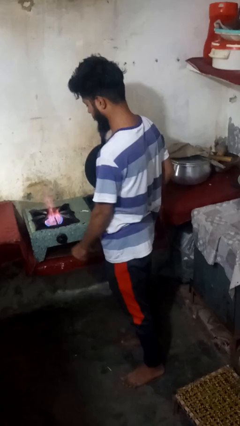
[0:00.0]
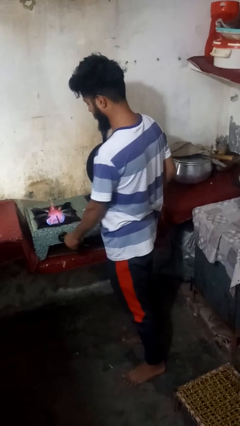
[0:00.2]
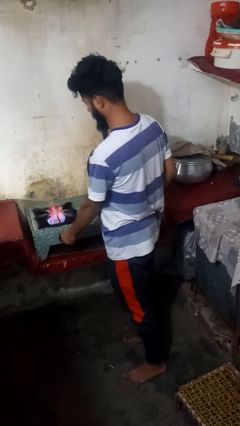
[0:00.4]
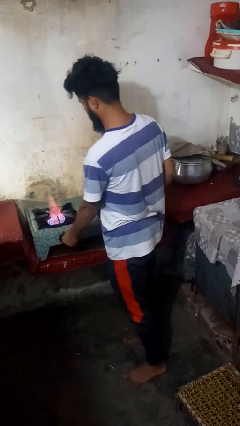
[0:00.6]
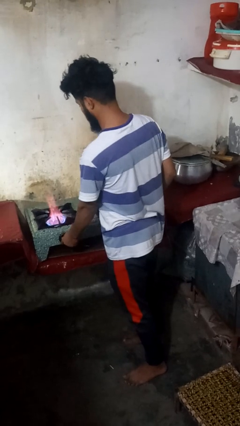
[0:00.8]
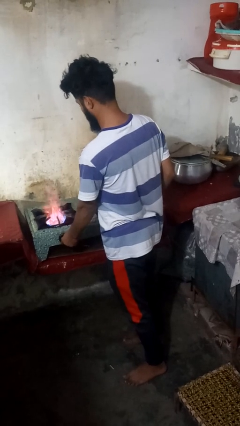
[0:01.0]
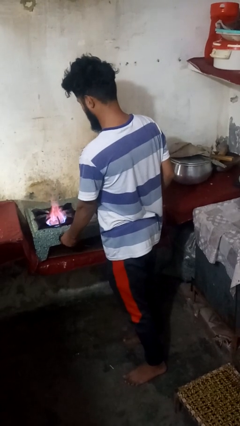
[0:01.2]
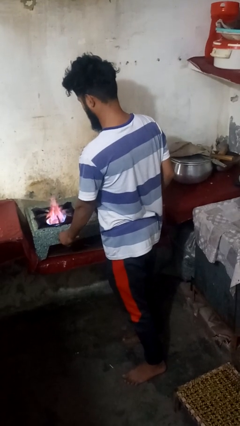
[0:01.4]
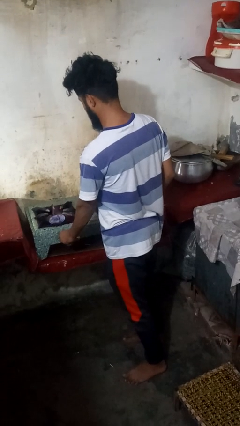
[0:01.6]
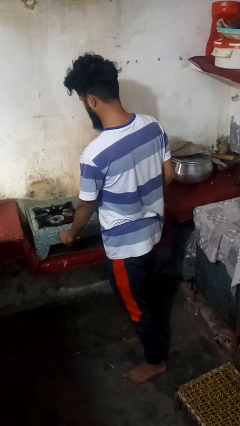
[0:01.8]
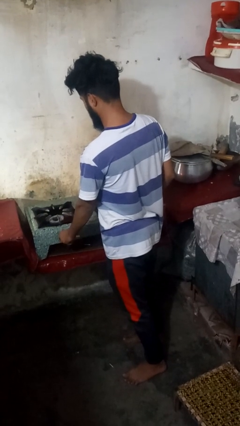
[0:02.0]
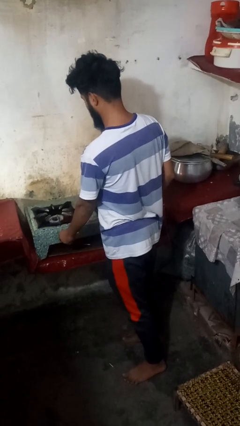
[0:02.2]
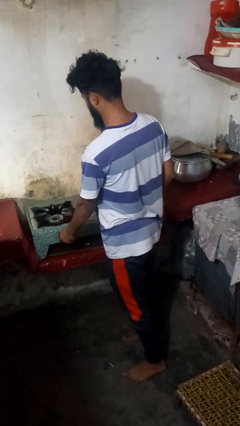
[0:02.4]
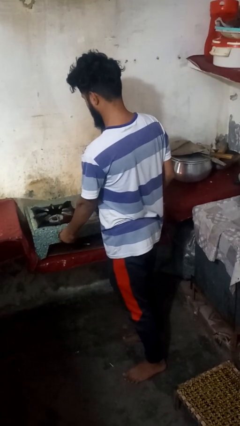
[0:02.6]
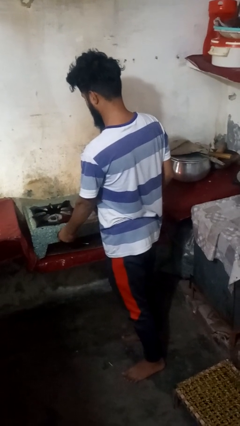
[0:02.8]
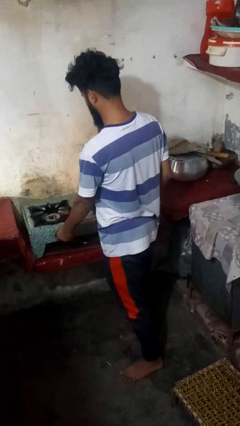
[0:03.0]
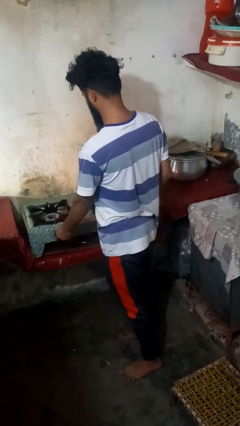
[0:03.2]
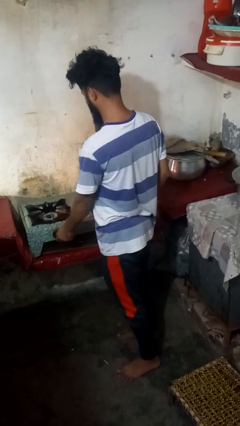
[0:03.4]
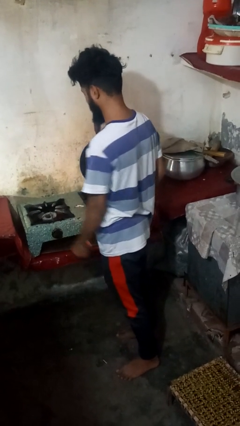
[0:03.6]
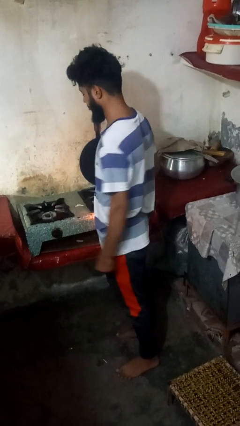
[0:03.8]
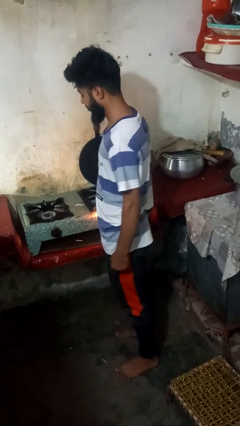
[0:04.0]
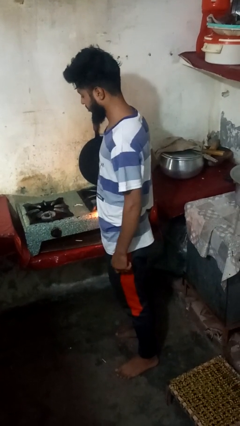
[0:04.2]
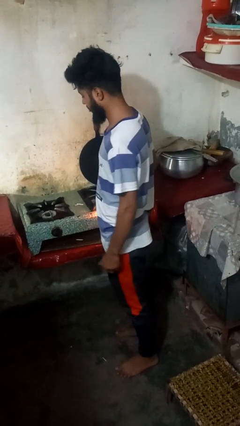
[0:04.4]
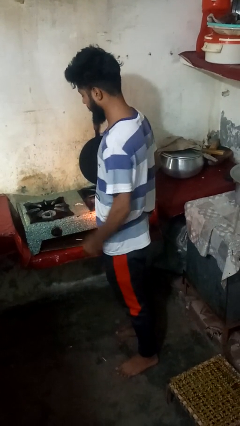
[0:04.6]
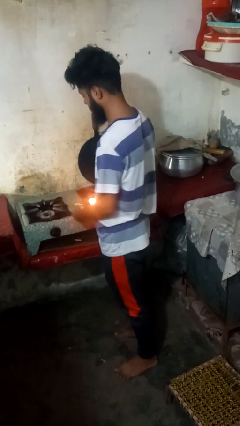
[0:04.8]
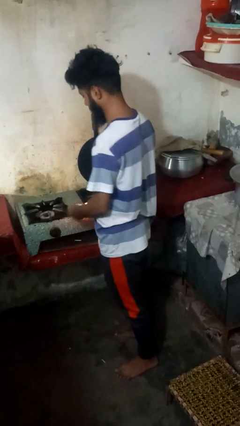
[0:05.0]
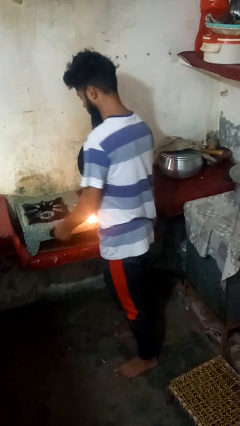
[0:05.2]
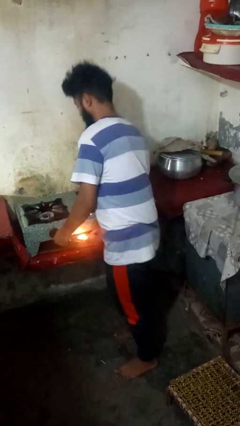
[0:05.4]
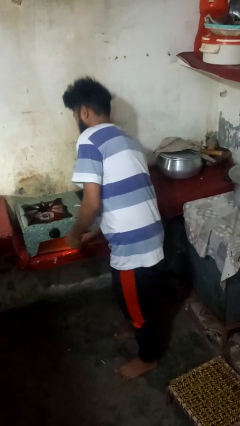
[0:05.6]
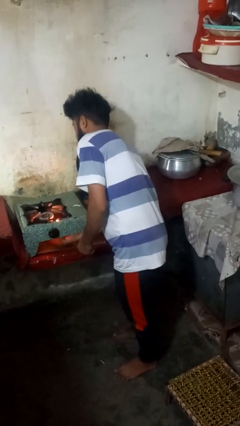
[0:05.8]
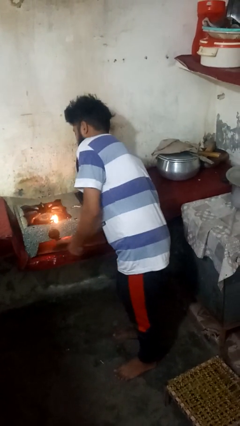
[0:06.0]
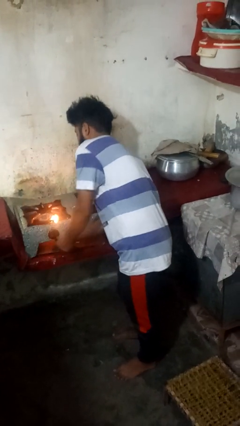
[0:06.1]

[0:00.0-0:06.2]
person turns off stovetop

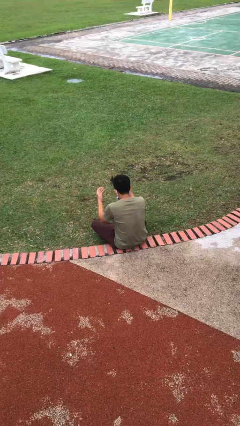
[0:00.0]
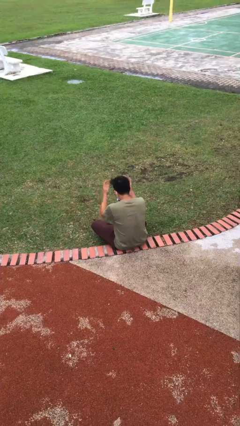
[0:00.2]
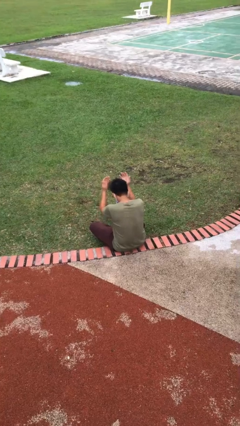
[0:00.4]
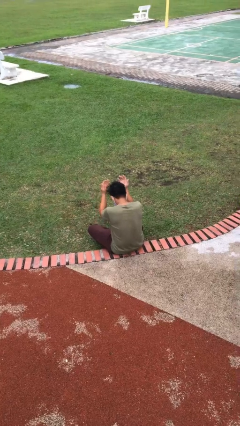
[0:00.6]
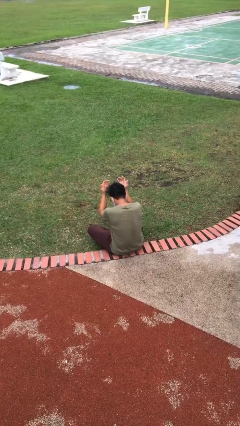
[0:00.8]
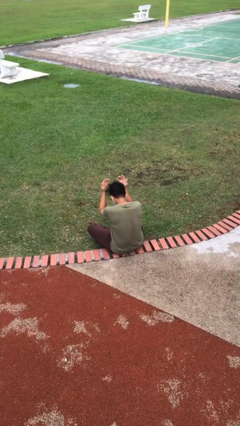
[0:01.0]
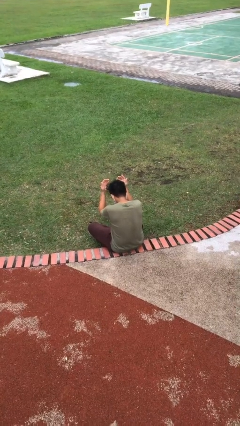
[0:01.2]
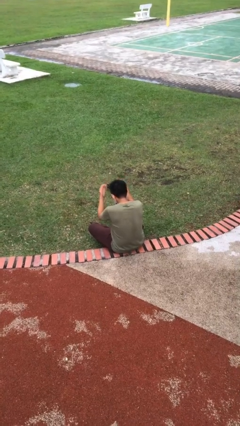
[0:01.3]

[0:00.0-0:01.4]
person prays

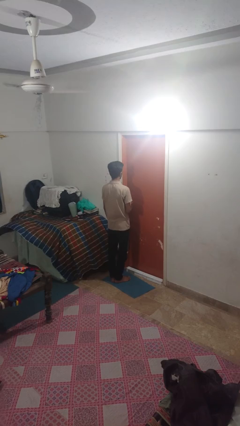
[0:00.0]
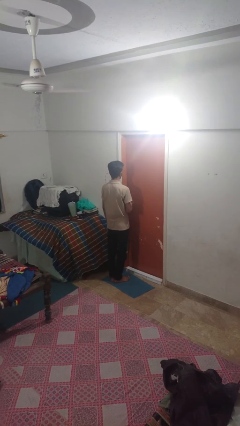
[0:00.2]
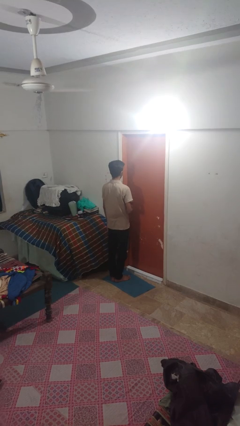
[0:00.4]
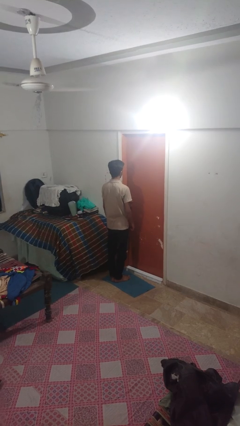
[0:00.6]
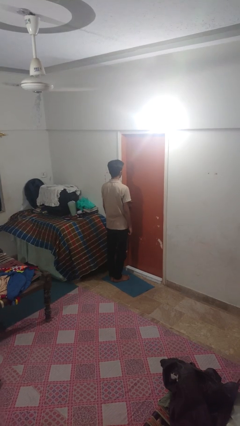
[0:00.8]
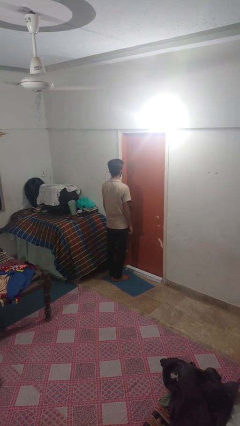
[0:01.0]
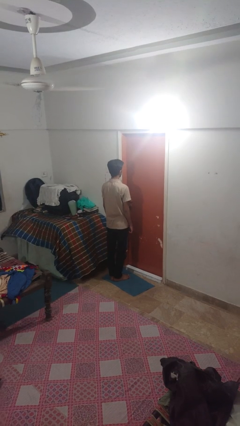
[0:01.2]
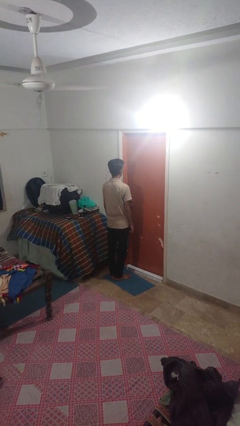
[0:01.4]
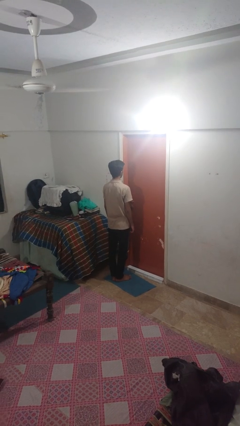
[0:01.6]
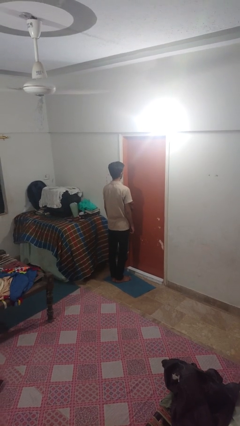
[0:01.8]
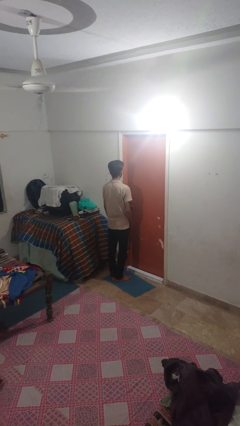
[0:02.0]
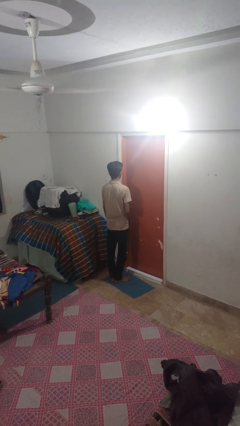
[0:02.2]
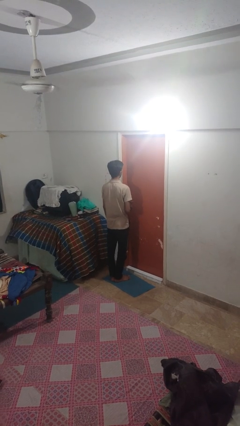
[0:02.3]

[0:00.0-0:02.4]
person unlocks door with keys

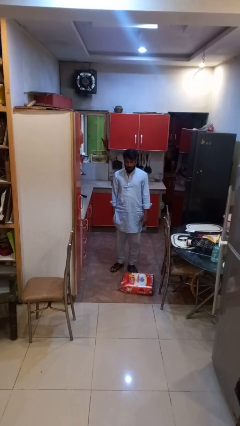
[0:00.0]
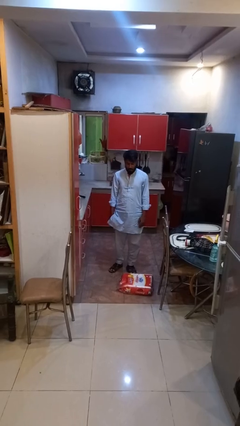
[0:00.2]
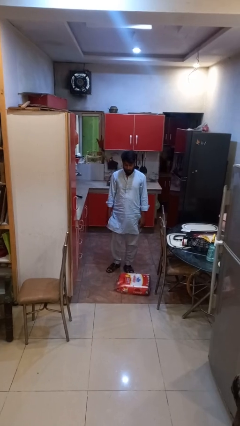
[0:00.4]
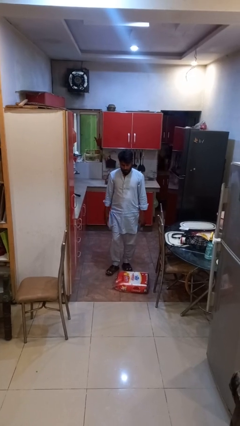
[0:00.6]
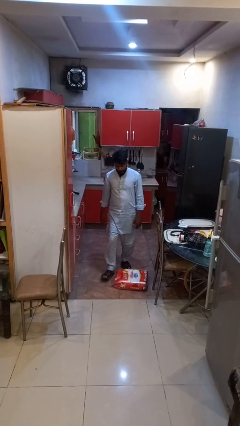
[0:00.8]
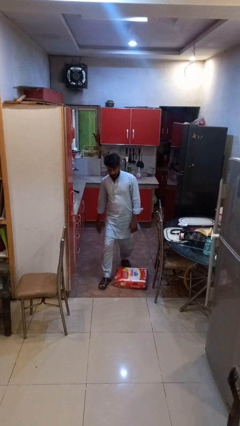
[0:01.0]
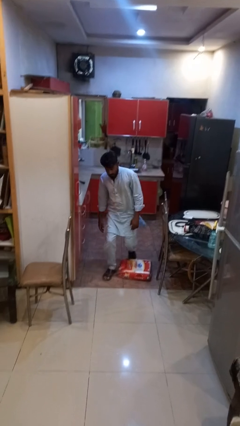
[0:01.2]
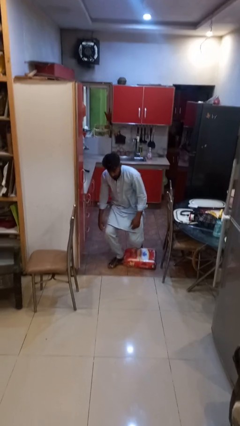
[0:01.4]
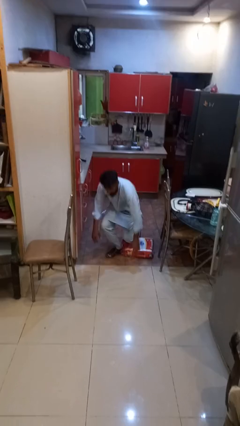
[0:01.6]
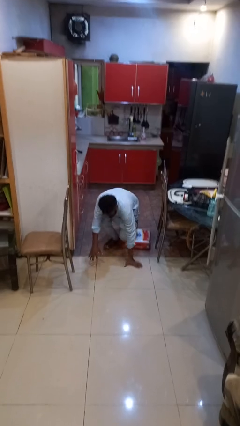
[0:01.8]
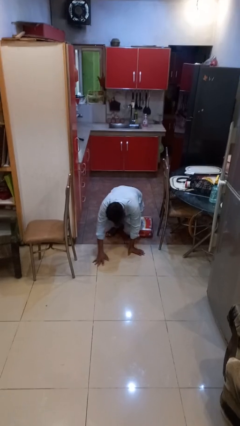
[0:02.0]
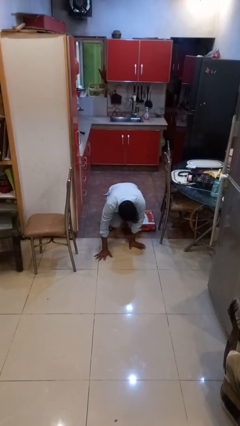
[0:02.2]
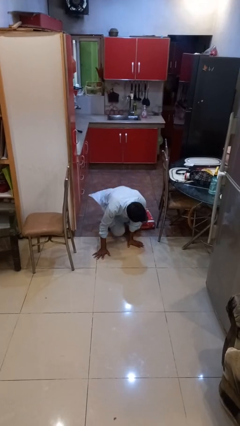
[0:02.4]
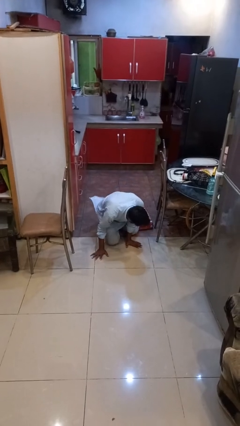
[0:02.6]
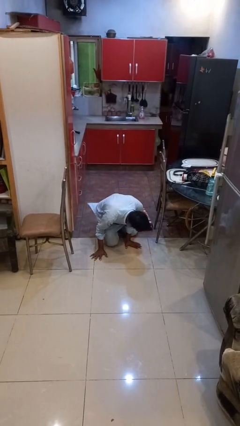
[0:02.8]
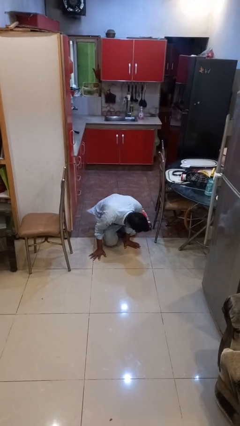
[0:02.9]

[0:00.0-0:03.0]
person trips on object on floor

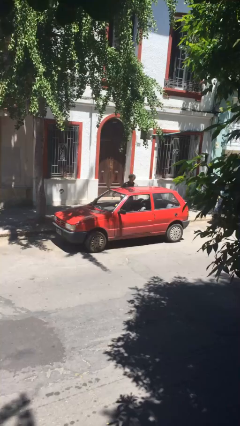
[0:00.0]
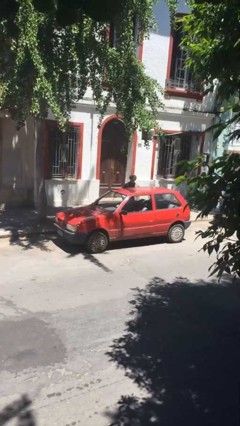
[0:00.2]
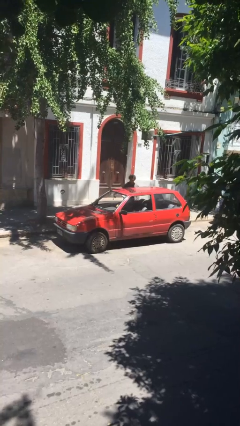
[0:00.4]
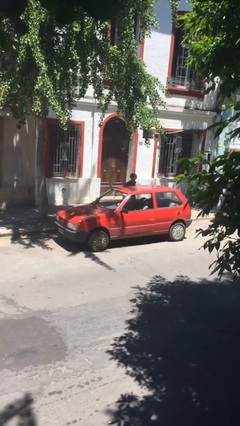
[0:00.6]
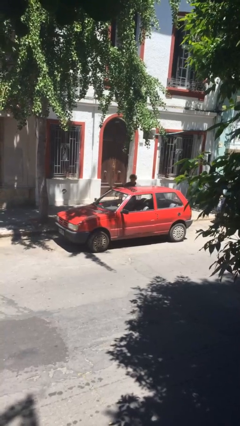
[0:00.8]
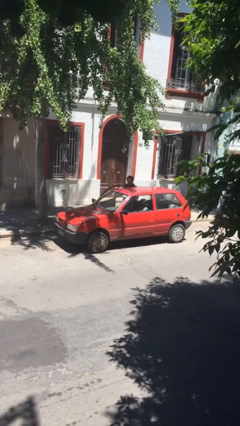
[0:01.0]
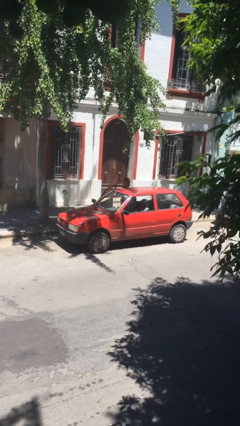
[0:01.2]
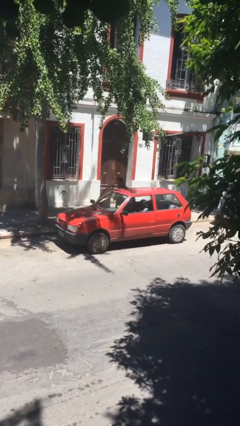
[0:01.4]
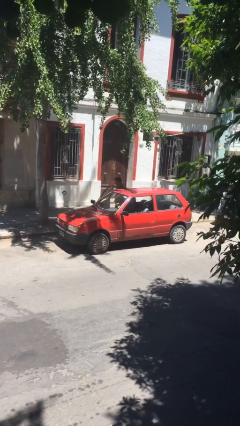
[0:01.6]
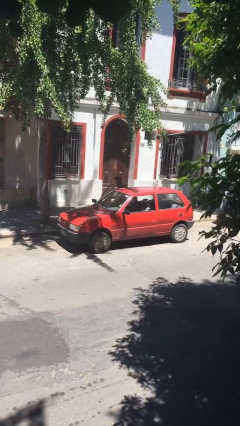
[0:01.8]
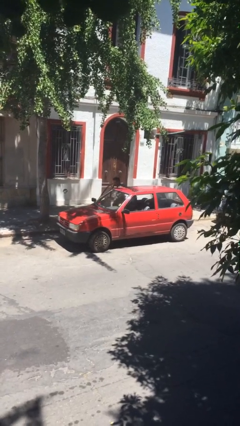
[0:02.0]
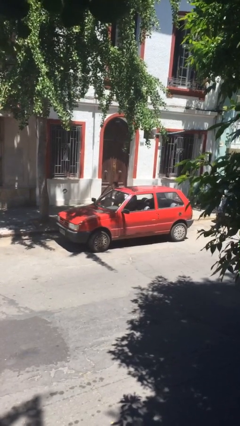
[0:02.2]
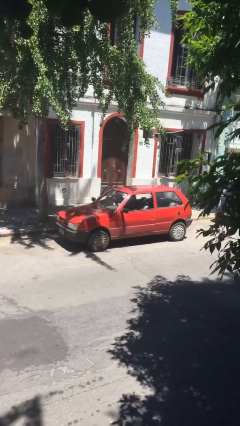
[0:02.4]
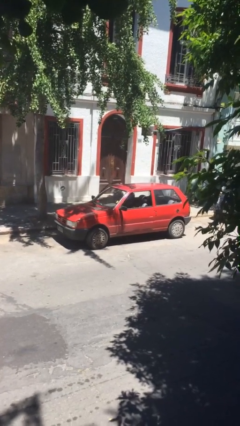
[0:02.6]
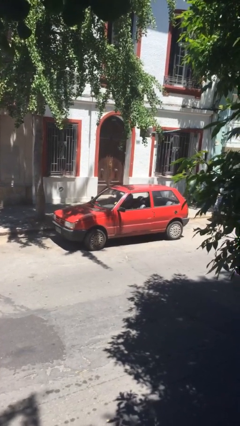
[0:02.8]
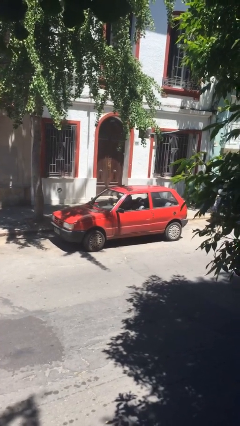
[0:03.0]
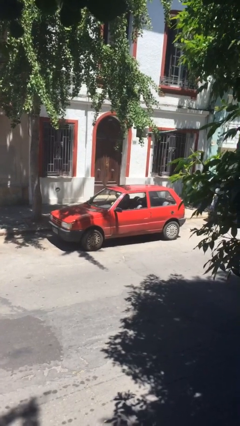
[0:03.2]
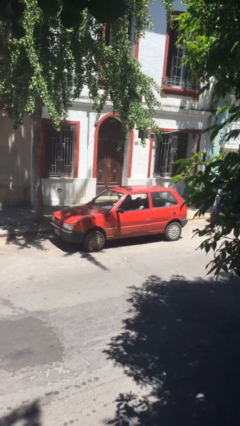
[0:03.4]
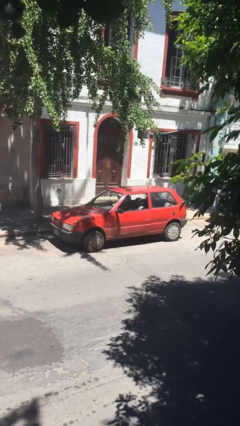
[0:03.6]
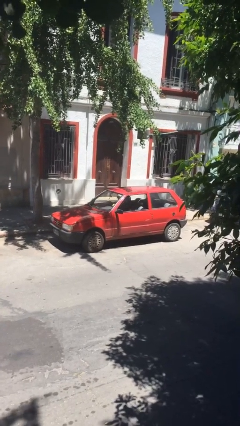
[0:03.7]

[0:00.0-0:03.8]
car picks up person

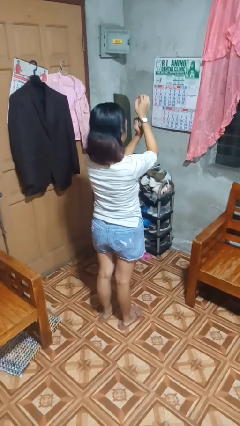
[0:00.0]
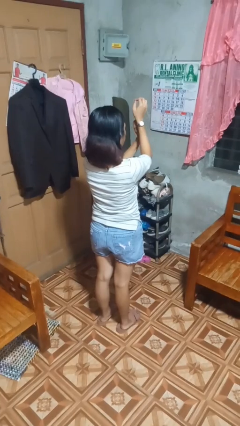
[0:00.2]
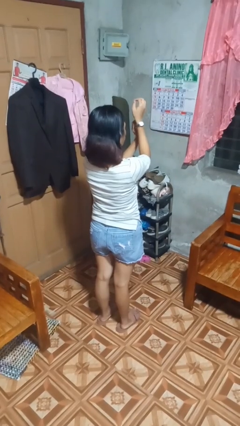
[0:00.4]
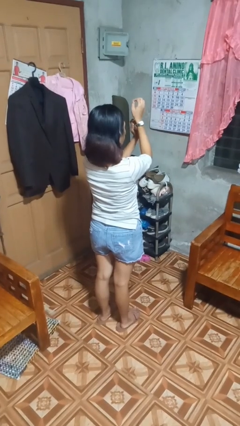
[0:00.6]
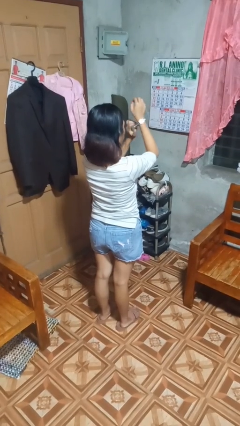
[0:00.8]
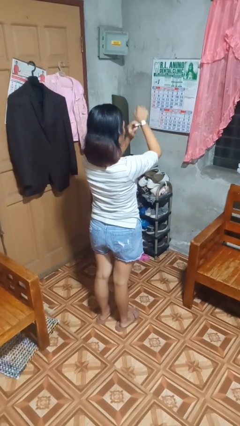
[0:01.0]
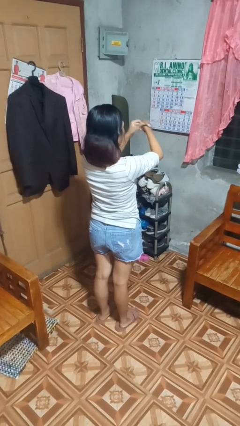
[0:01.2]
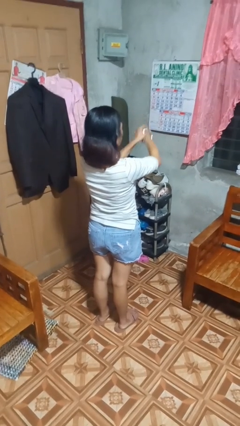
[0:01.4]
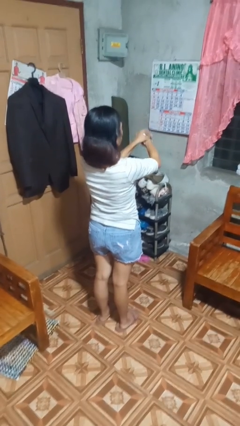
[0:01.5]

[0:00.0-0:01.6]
person takes off wristwatch
